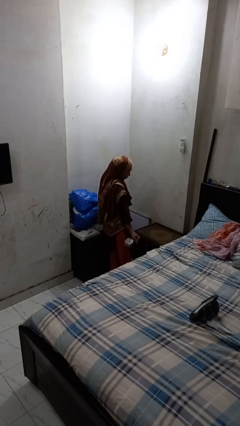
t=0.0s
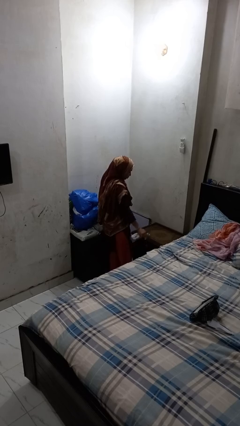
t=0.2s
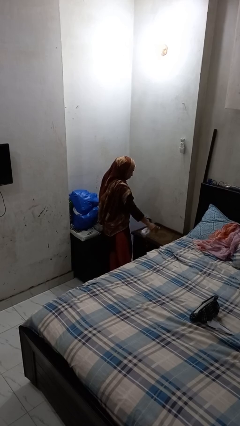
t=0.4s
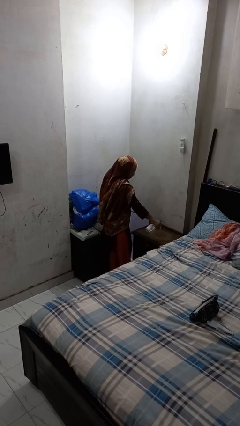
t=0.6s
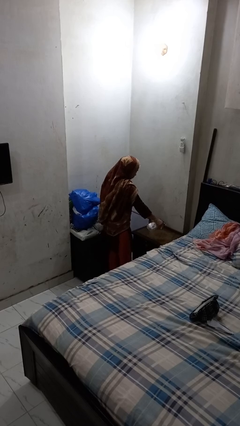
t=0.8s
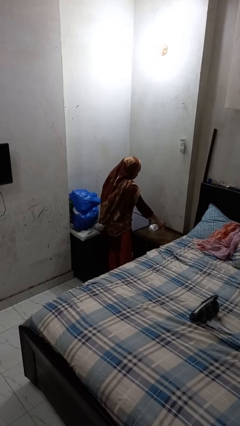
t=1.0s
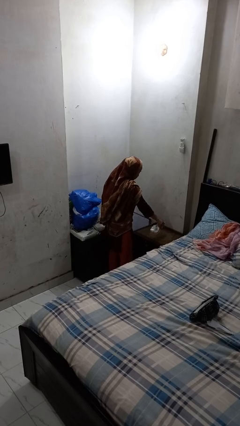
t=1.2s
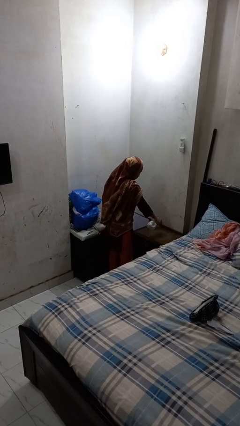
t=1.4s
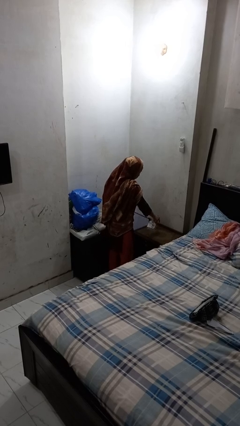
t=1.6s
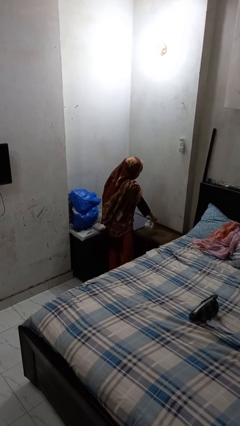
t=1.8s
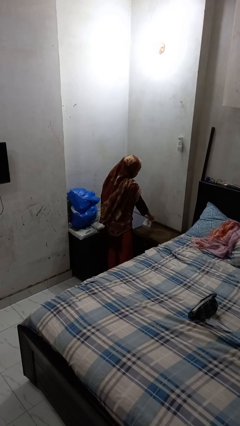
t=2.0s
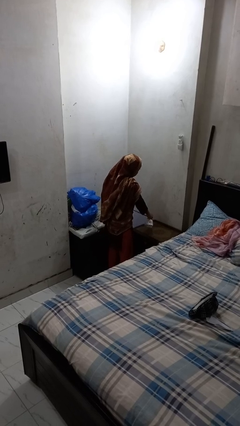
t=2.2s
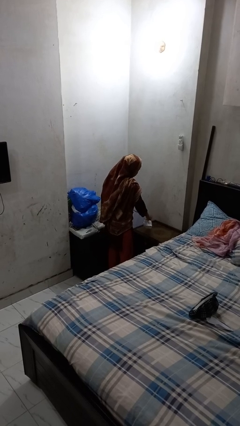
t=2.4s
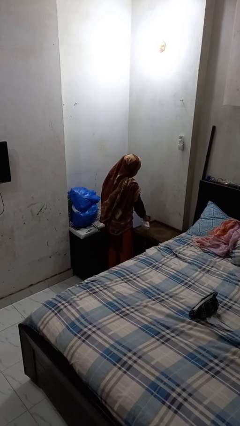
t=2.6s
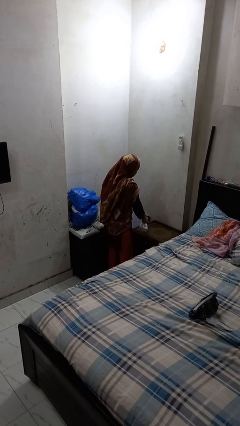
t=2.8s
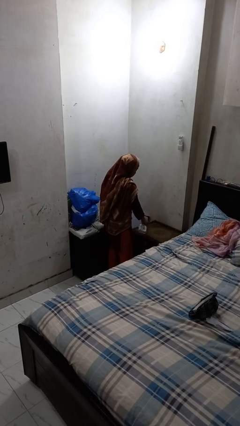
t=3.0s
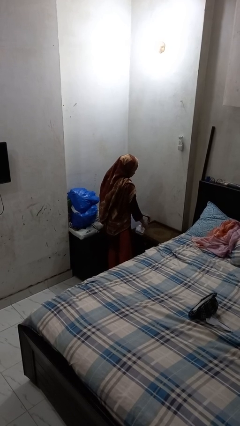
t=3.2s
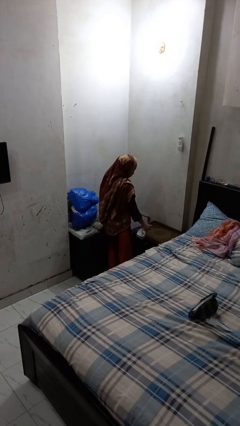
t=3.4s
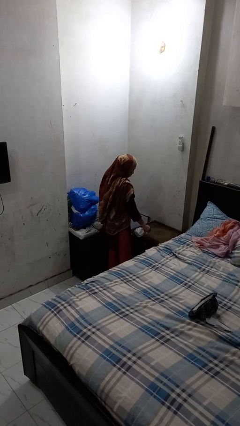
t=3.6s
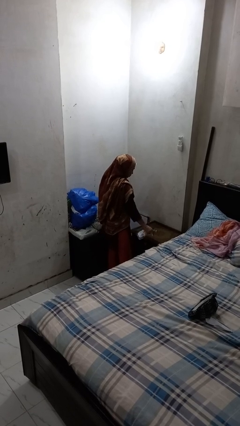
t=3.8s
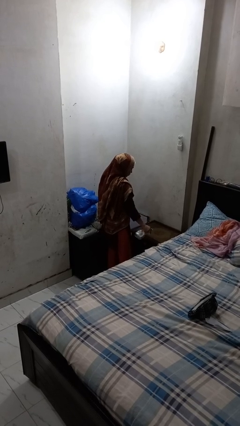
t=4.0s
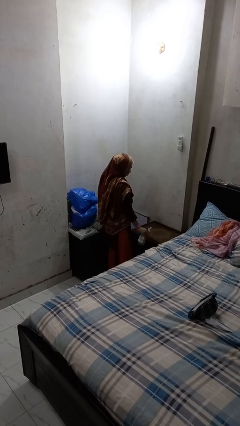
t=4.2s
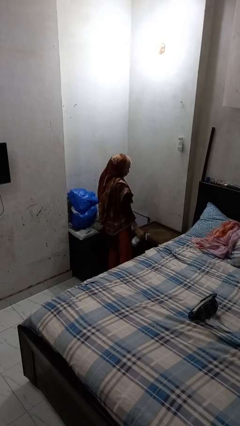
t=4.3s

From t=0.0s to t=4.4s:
person sprays from bottle

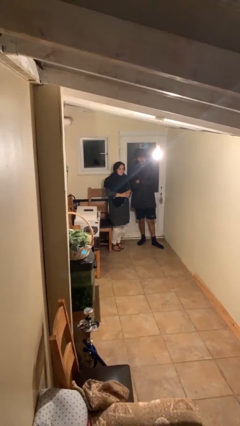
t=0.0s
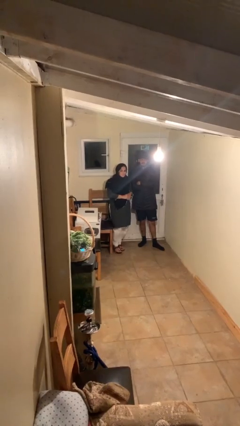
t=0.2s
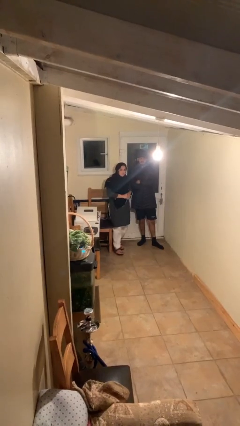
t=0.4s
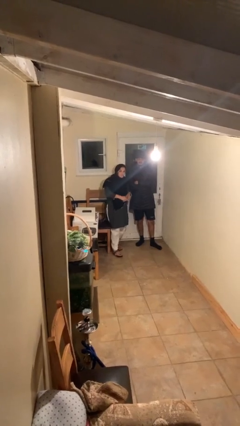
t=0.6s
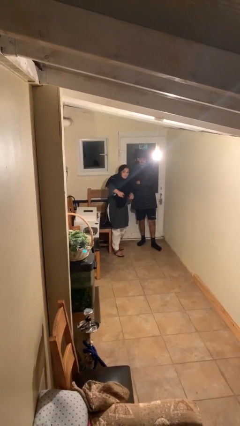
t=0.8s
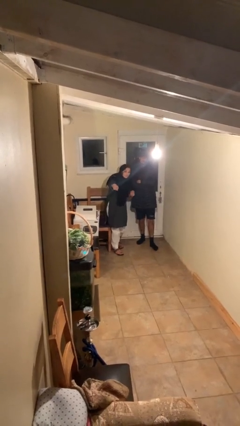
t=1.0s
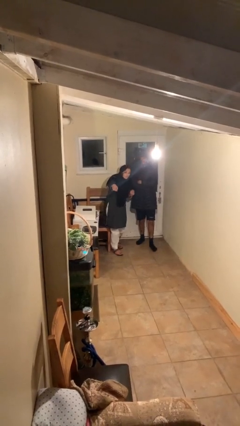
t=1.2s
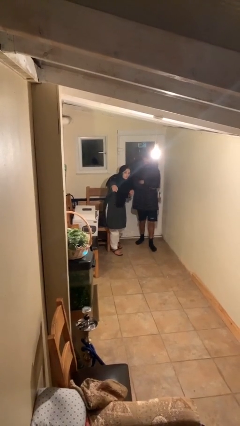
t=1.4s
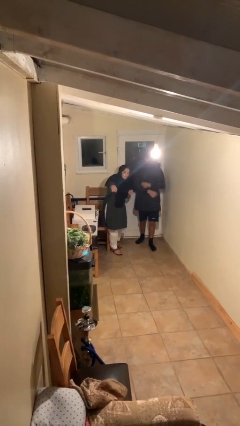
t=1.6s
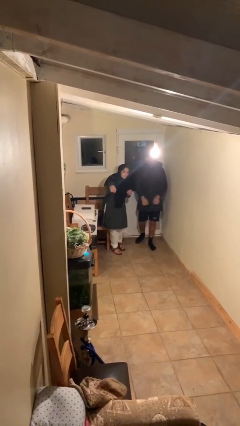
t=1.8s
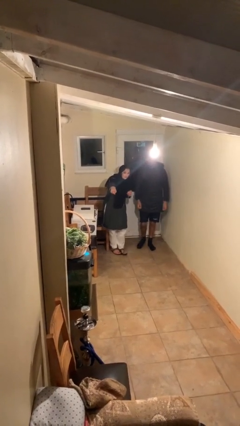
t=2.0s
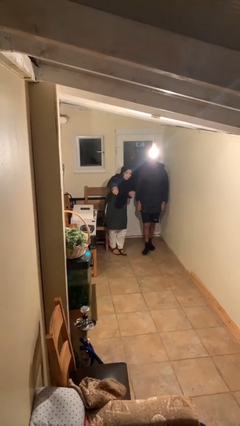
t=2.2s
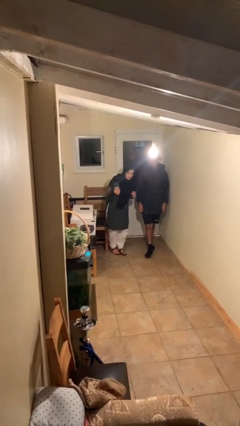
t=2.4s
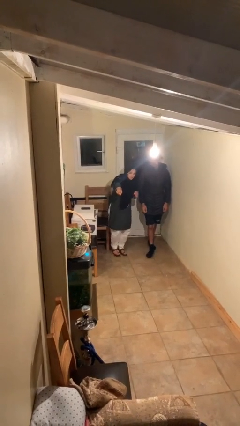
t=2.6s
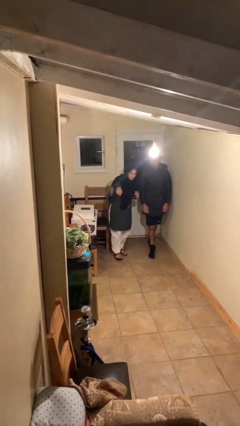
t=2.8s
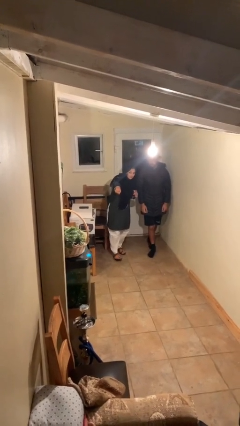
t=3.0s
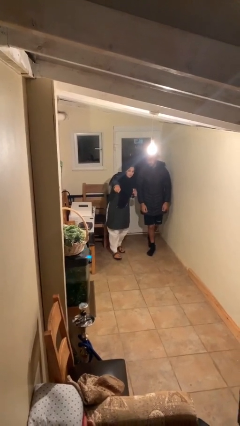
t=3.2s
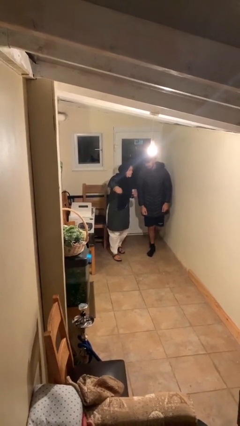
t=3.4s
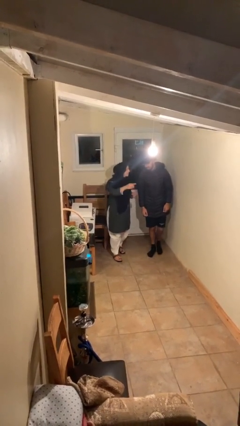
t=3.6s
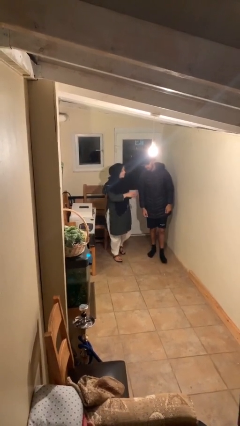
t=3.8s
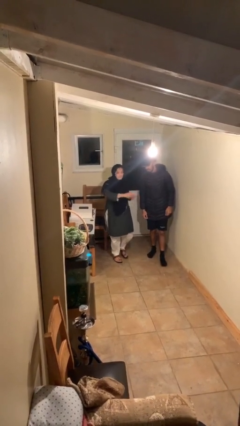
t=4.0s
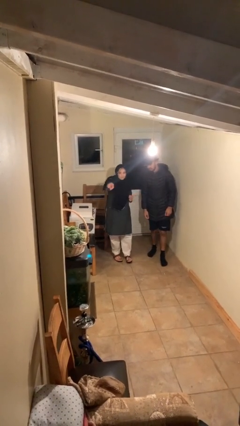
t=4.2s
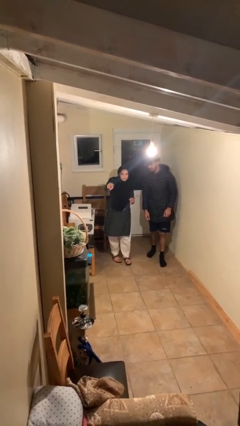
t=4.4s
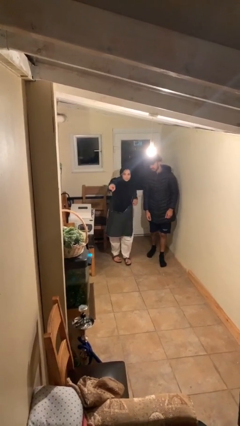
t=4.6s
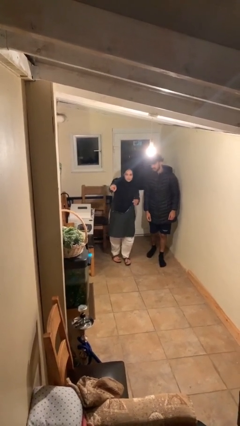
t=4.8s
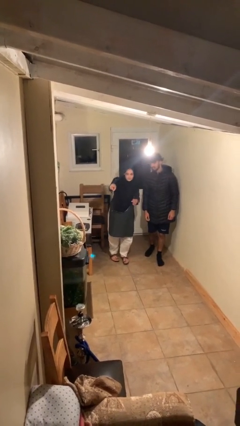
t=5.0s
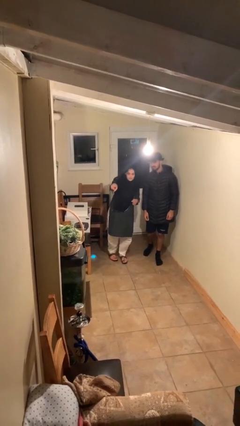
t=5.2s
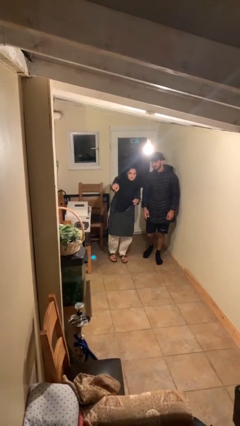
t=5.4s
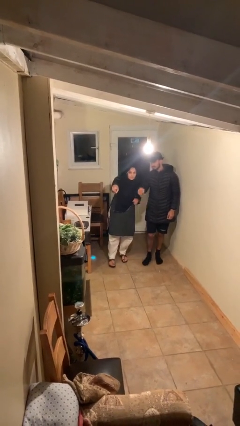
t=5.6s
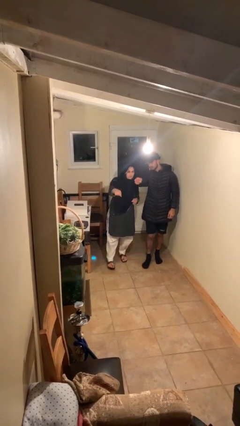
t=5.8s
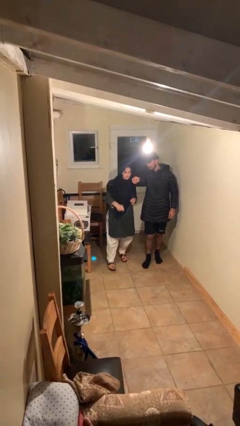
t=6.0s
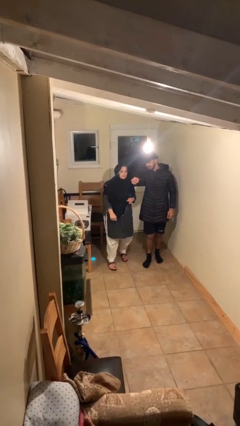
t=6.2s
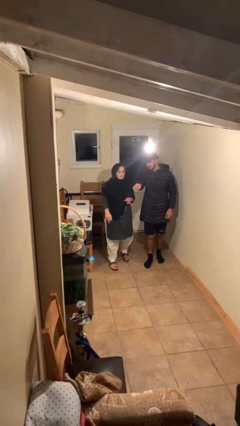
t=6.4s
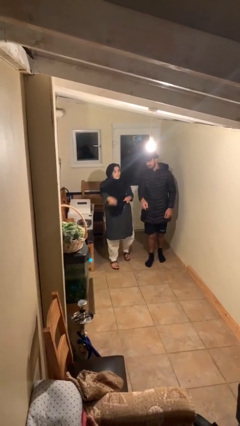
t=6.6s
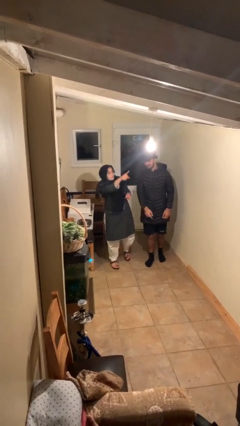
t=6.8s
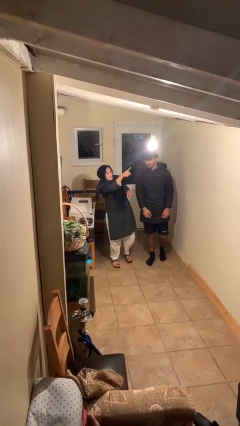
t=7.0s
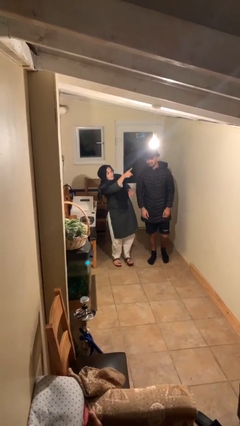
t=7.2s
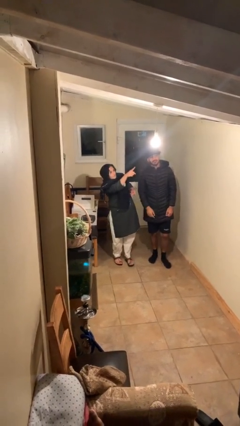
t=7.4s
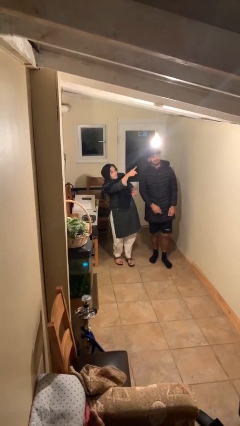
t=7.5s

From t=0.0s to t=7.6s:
person talks to person

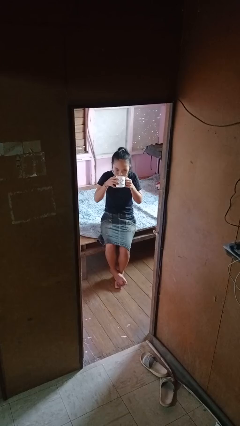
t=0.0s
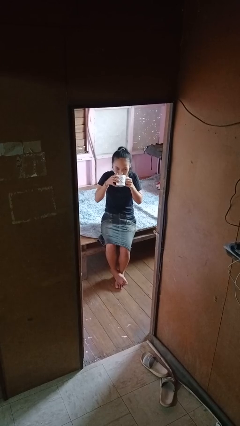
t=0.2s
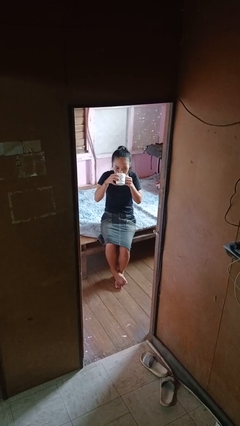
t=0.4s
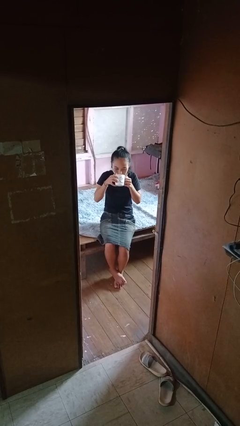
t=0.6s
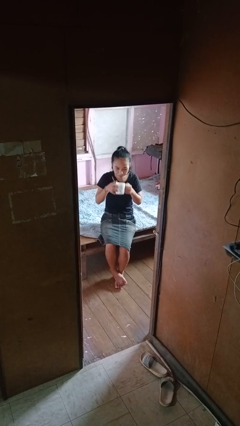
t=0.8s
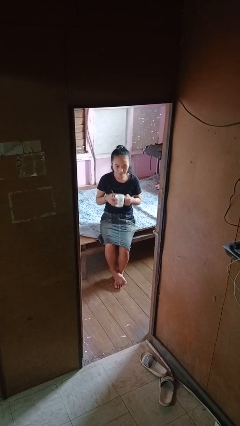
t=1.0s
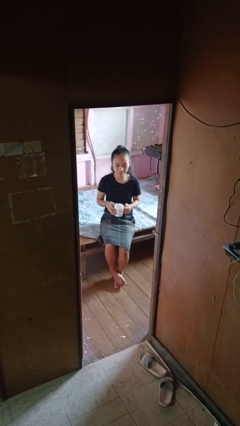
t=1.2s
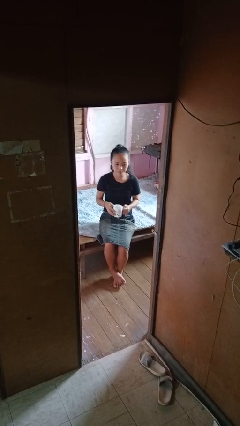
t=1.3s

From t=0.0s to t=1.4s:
person drinks from mug

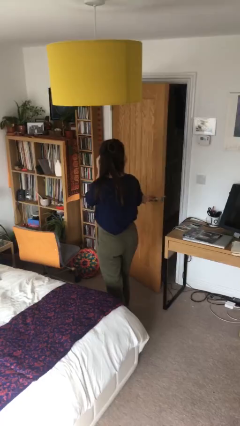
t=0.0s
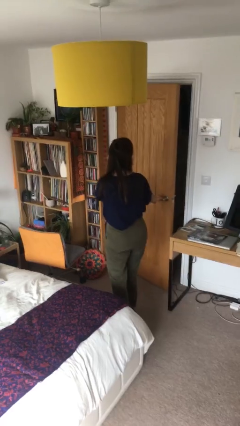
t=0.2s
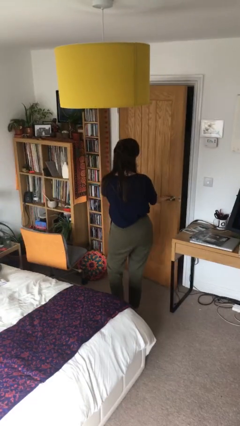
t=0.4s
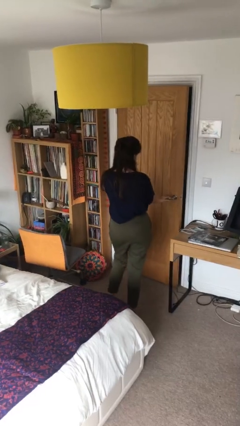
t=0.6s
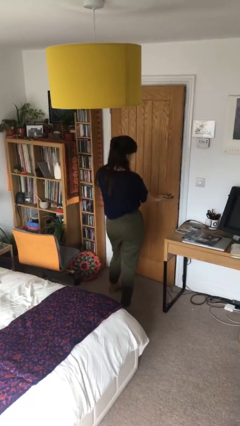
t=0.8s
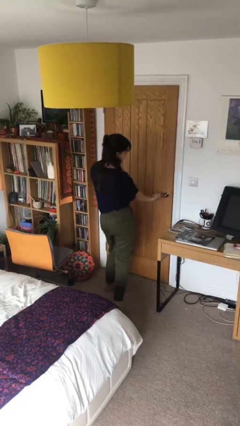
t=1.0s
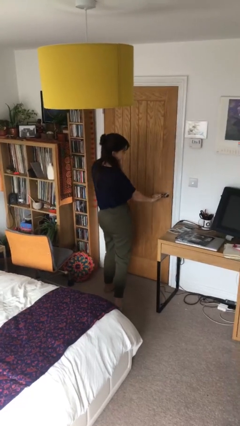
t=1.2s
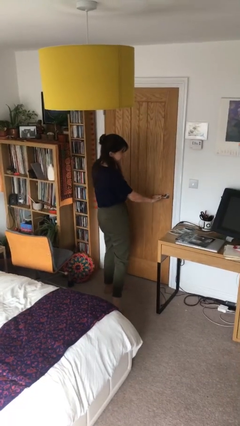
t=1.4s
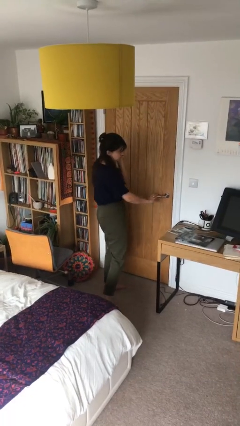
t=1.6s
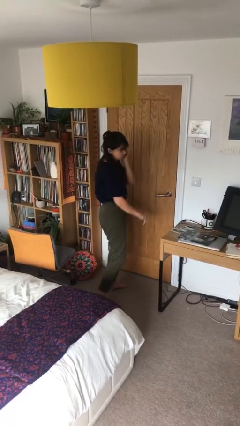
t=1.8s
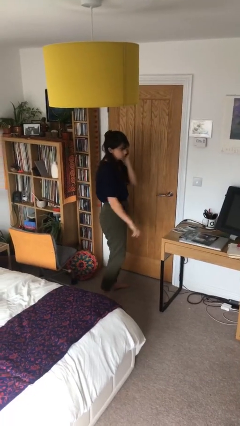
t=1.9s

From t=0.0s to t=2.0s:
person closes facility door

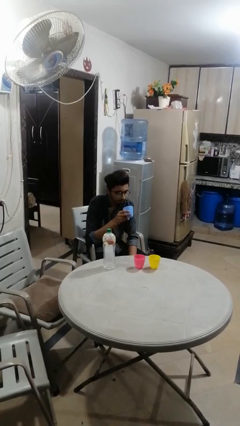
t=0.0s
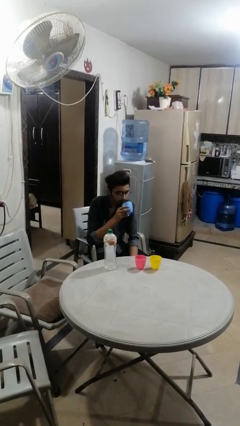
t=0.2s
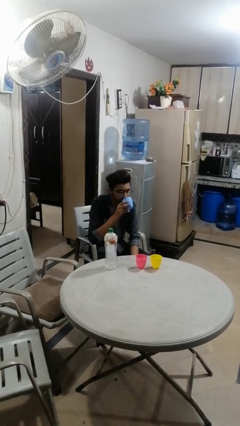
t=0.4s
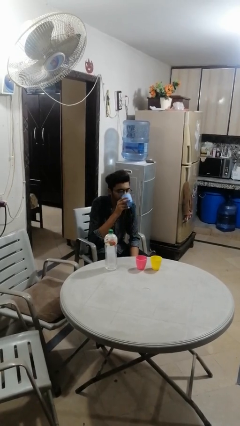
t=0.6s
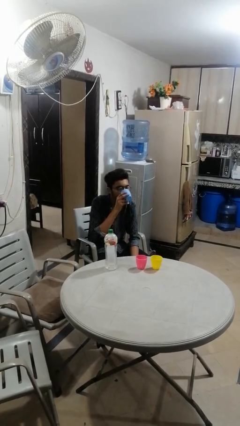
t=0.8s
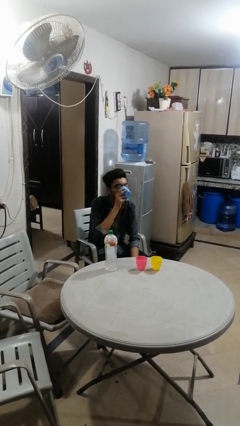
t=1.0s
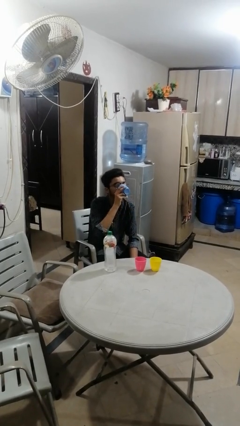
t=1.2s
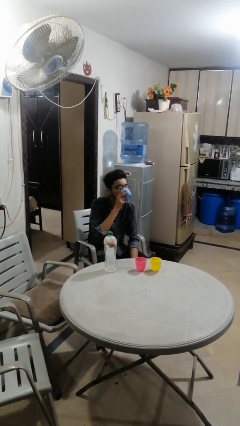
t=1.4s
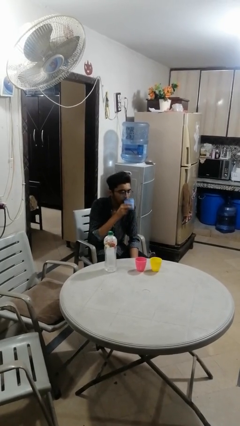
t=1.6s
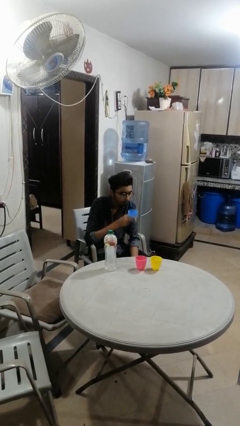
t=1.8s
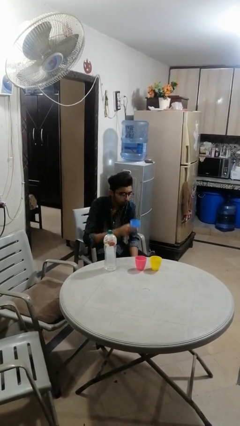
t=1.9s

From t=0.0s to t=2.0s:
person drinks from shotglass

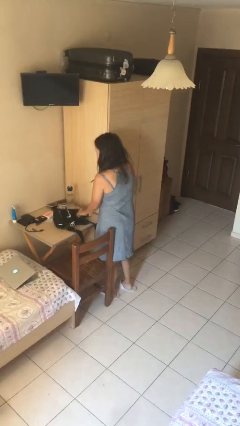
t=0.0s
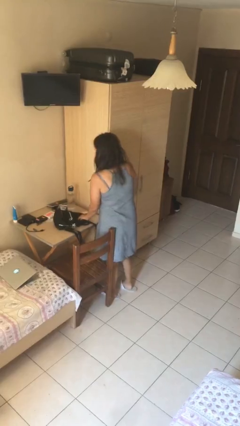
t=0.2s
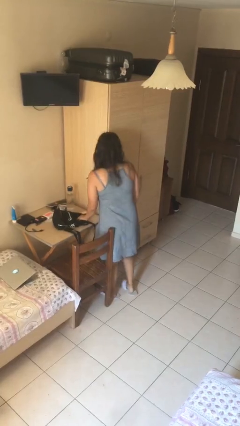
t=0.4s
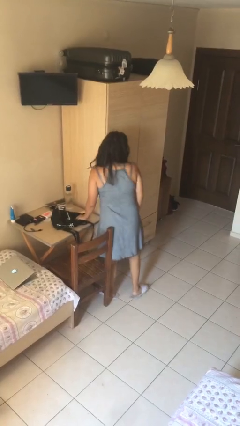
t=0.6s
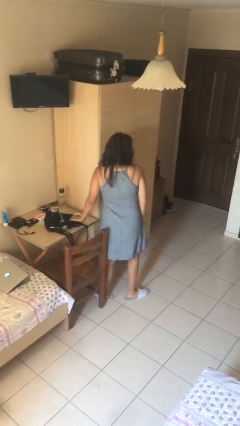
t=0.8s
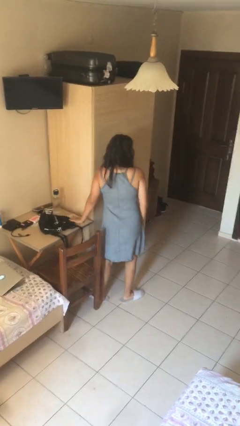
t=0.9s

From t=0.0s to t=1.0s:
person puts down object on table
